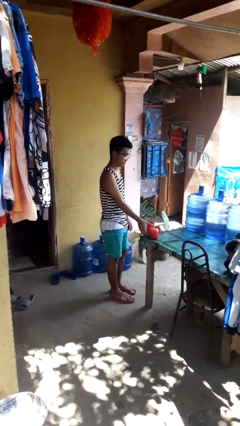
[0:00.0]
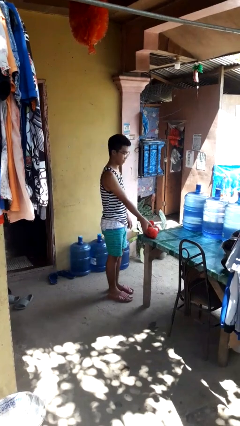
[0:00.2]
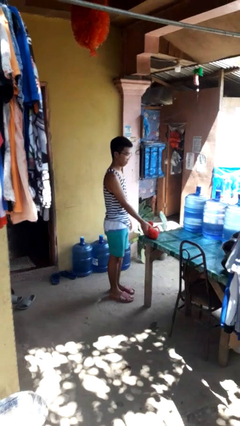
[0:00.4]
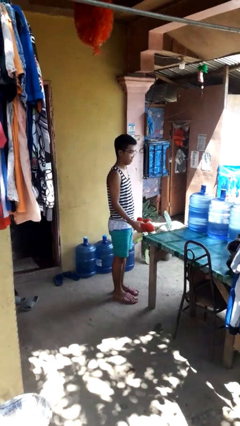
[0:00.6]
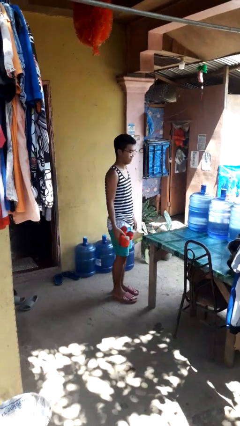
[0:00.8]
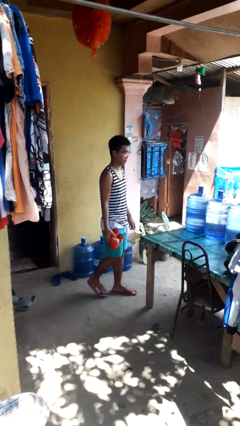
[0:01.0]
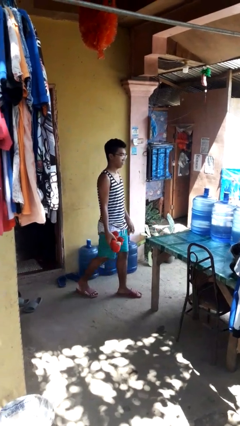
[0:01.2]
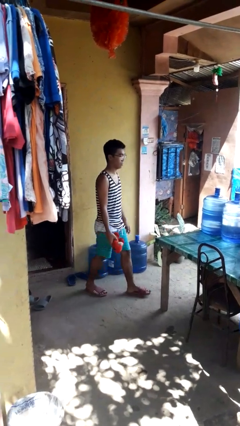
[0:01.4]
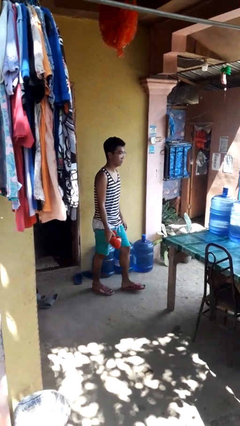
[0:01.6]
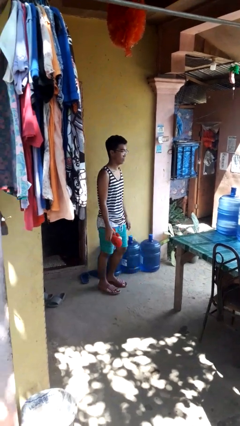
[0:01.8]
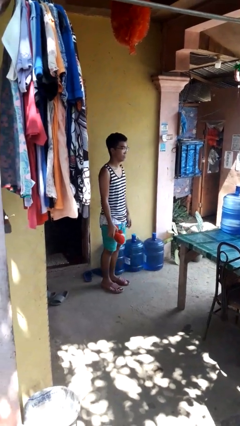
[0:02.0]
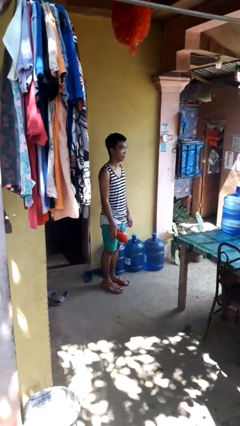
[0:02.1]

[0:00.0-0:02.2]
person picks up object from table

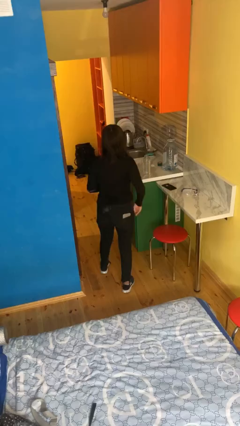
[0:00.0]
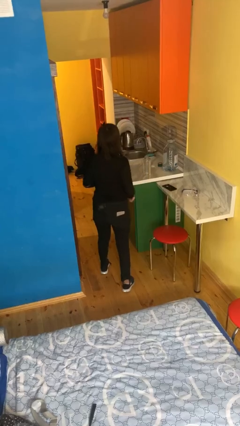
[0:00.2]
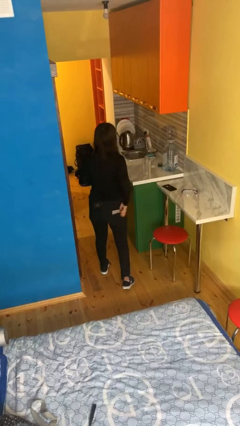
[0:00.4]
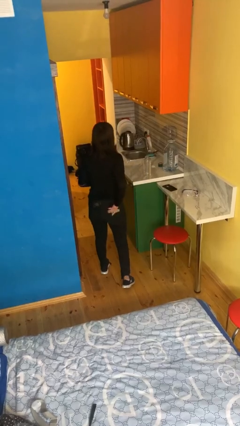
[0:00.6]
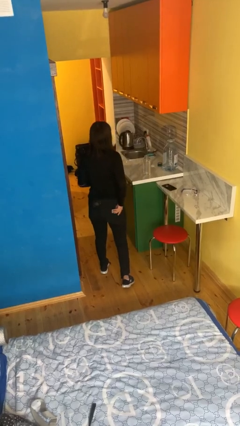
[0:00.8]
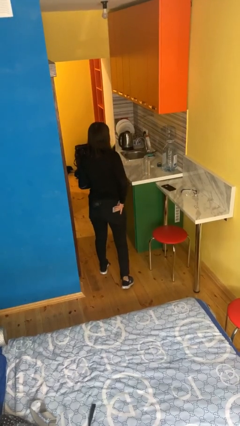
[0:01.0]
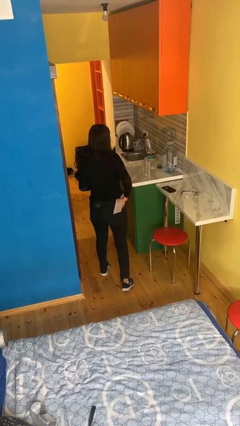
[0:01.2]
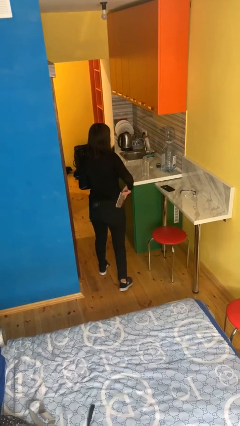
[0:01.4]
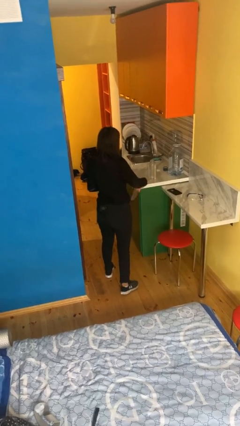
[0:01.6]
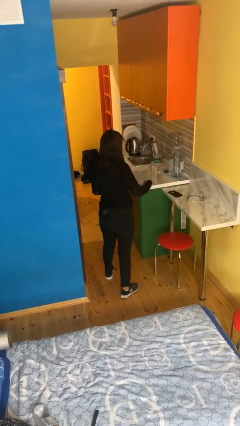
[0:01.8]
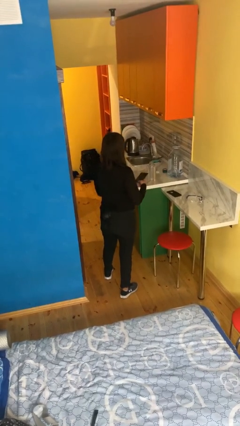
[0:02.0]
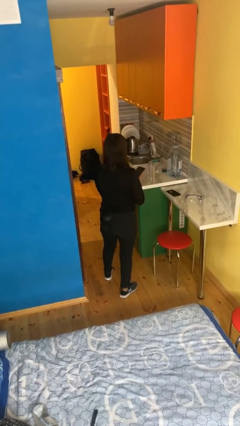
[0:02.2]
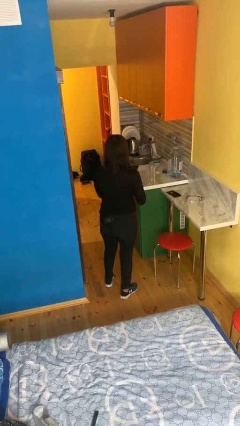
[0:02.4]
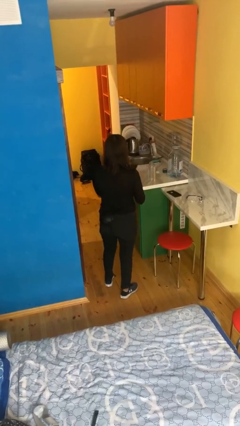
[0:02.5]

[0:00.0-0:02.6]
person takes phone from pocket

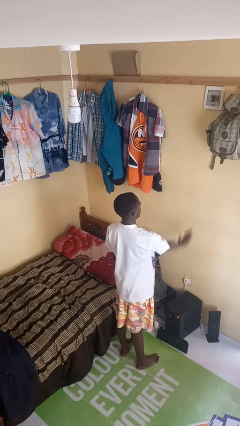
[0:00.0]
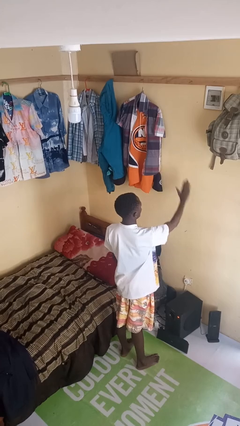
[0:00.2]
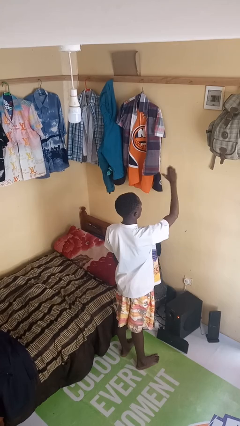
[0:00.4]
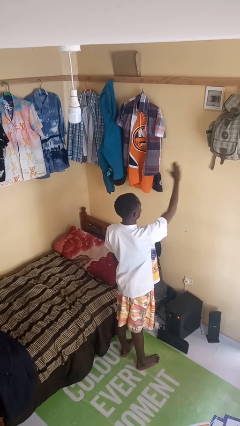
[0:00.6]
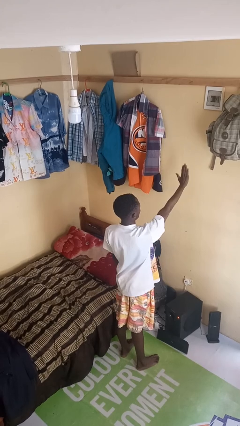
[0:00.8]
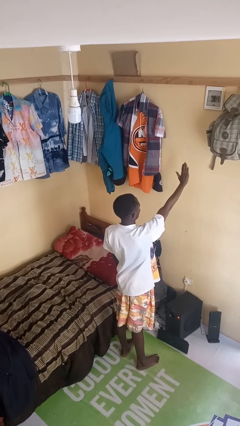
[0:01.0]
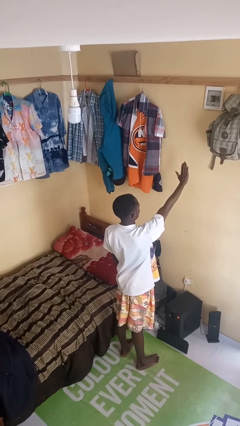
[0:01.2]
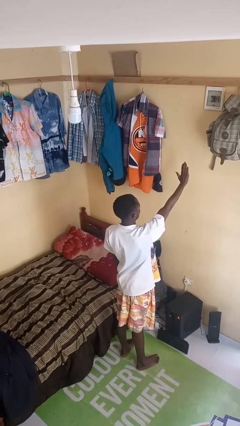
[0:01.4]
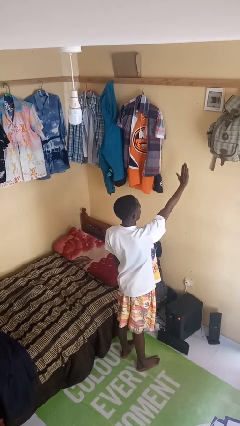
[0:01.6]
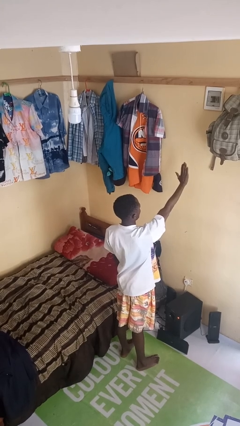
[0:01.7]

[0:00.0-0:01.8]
person gestures stop

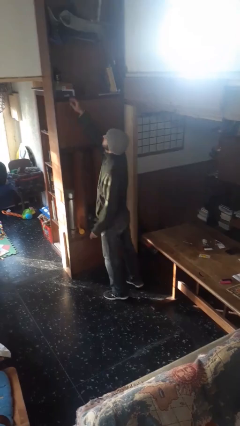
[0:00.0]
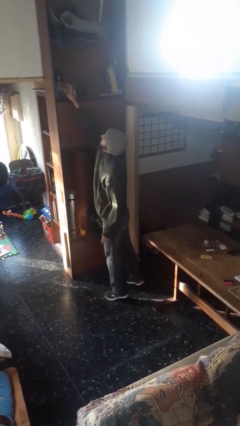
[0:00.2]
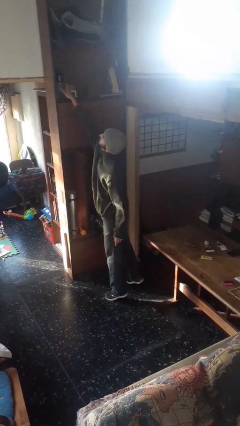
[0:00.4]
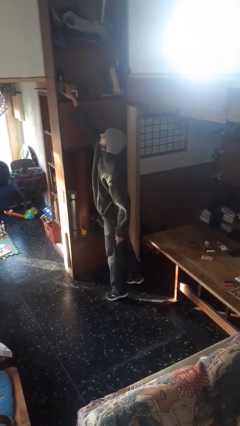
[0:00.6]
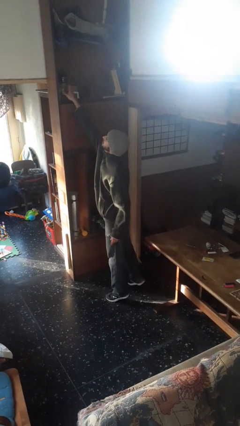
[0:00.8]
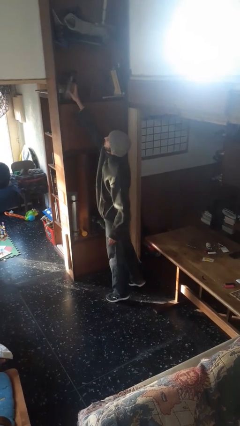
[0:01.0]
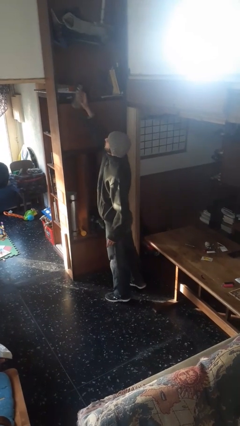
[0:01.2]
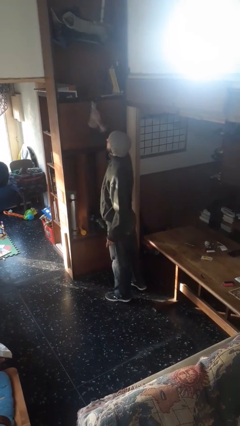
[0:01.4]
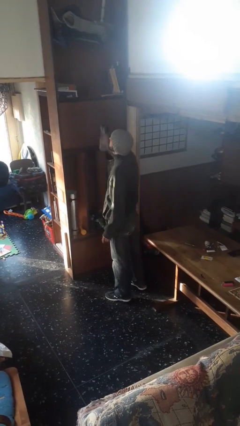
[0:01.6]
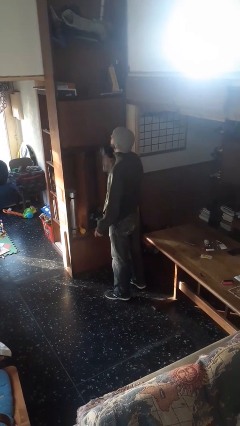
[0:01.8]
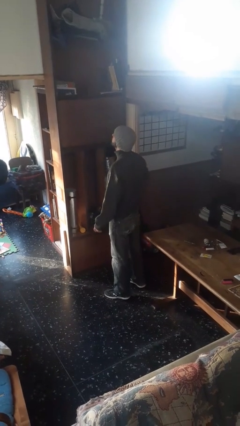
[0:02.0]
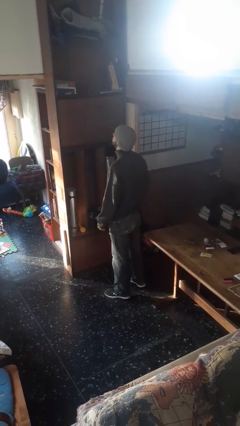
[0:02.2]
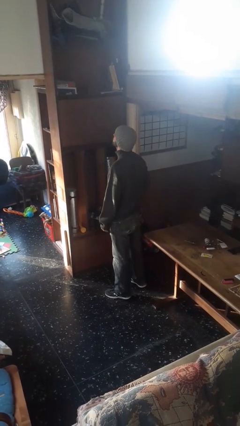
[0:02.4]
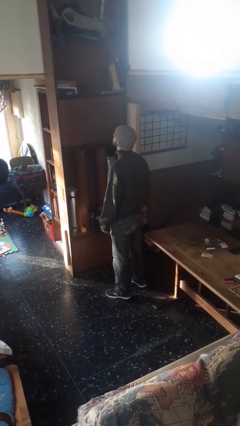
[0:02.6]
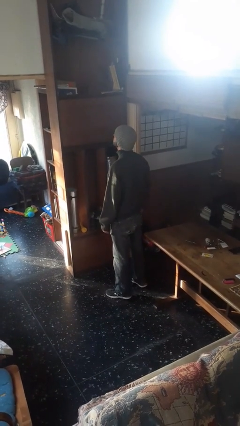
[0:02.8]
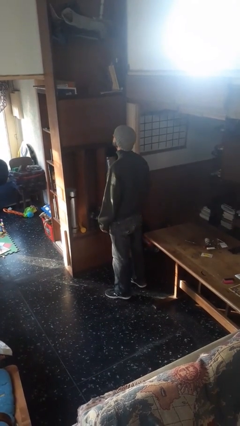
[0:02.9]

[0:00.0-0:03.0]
person puts down object on shelf

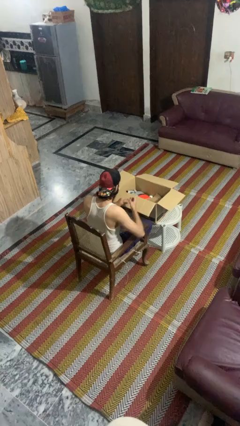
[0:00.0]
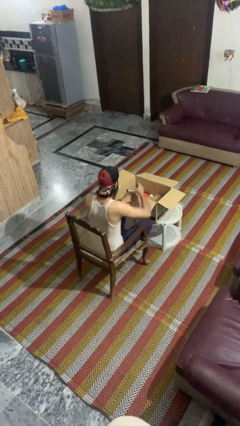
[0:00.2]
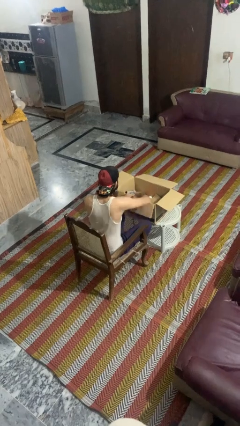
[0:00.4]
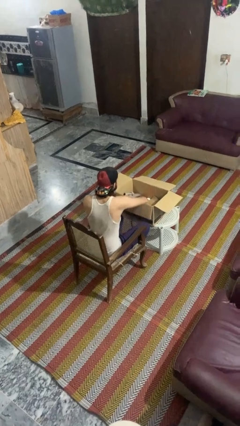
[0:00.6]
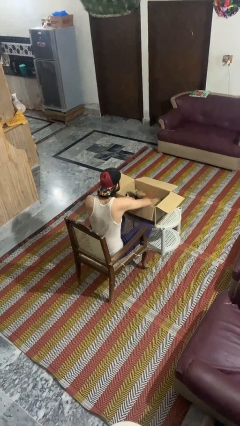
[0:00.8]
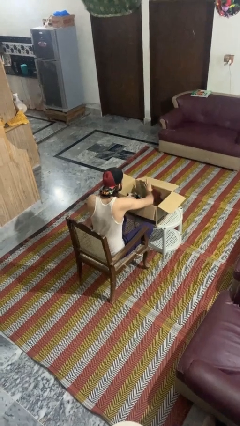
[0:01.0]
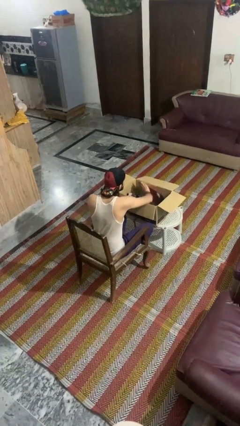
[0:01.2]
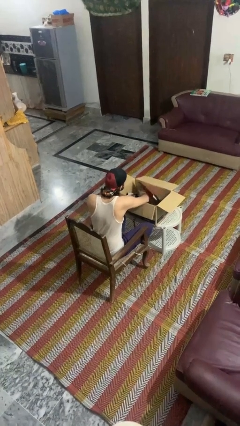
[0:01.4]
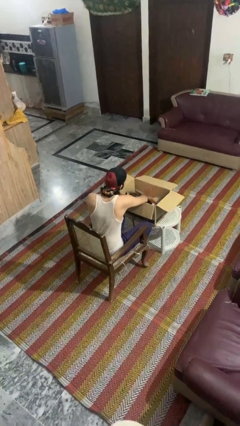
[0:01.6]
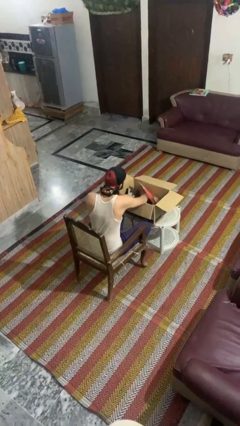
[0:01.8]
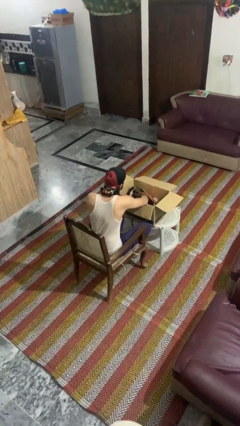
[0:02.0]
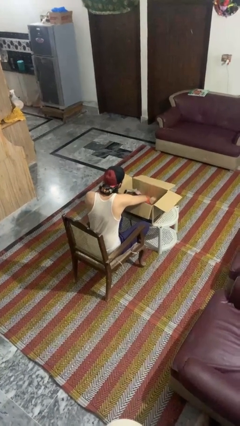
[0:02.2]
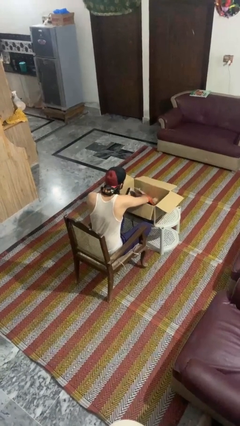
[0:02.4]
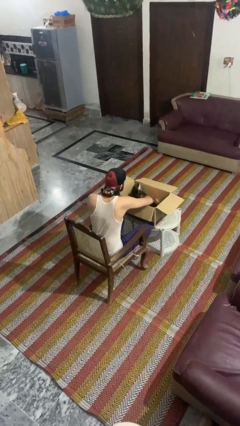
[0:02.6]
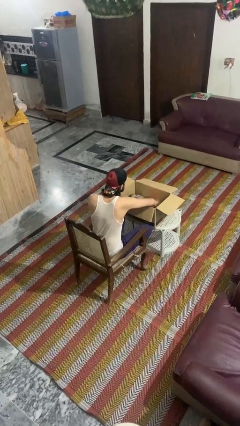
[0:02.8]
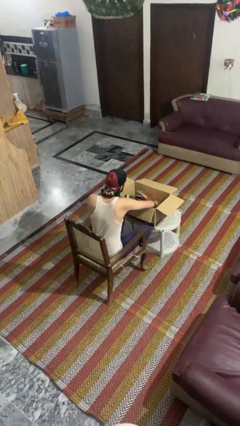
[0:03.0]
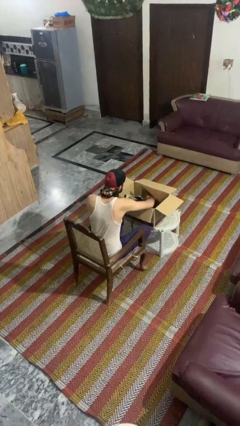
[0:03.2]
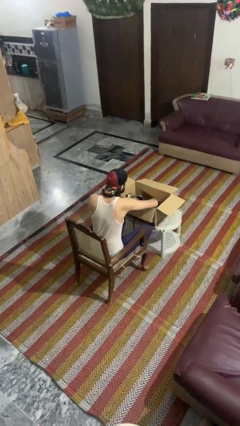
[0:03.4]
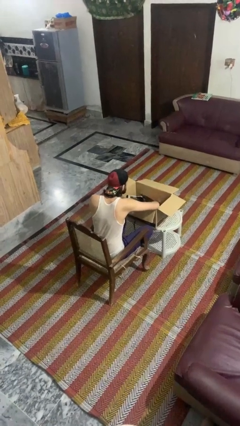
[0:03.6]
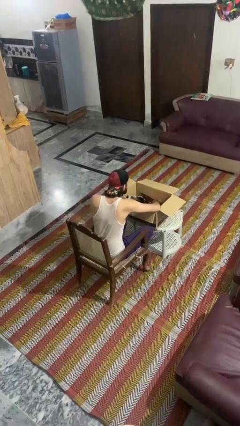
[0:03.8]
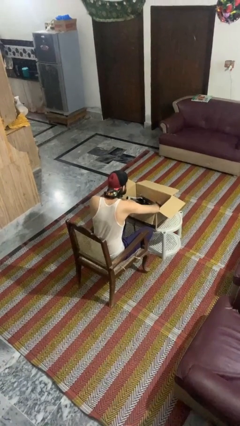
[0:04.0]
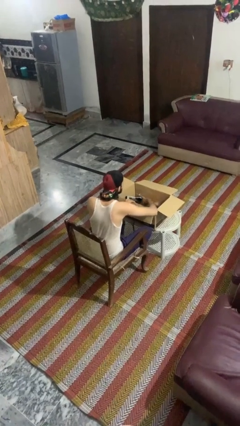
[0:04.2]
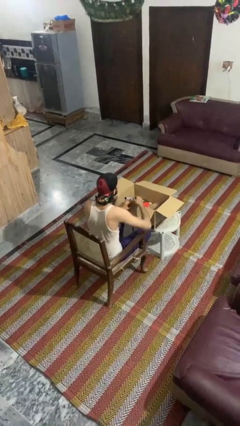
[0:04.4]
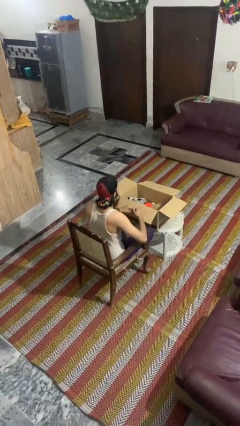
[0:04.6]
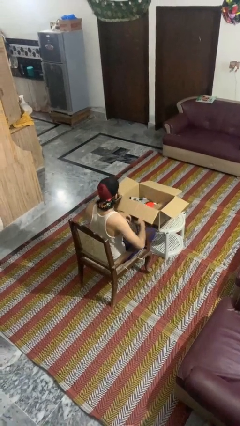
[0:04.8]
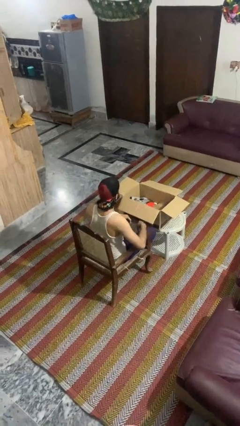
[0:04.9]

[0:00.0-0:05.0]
person searches in box

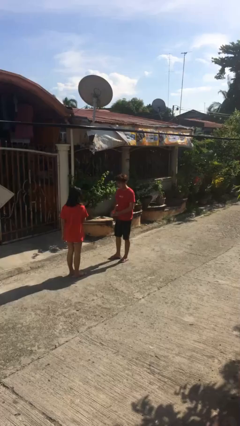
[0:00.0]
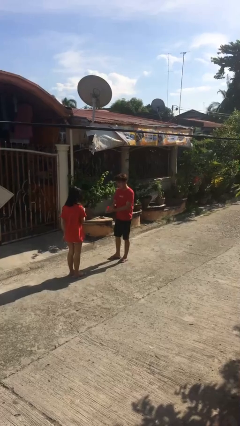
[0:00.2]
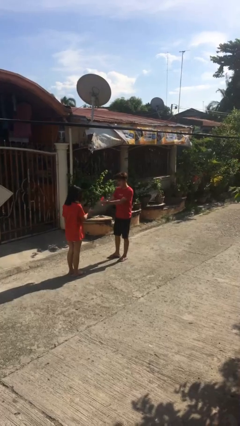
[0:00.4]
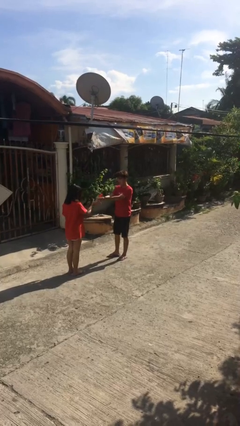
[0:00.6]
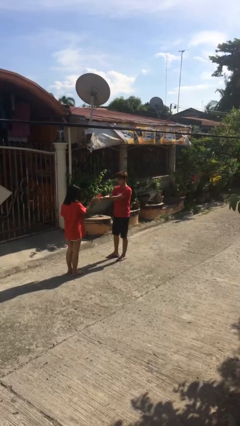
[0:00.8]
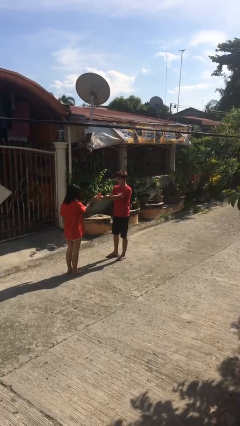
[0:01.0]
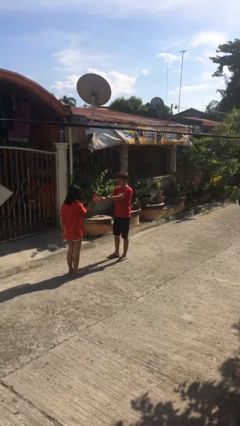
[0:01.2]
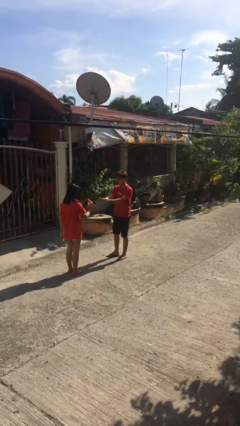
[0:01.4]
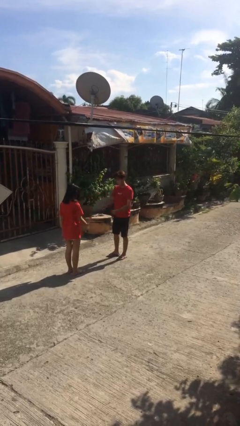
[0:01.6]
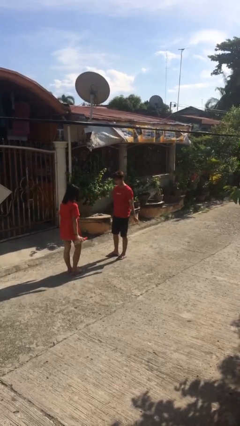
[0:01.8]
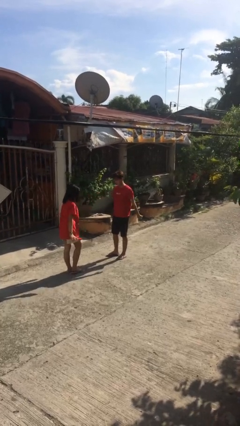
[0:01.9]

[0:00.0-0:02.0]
person transfers object to person

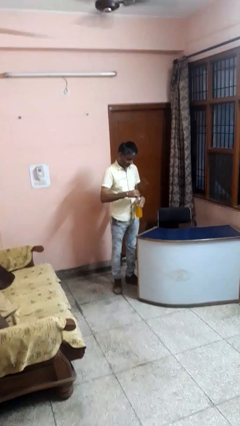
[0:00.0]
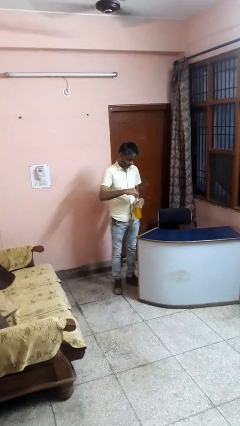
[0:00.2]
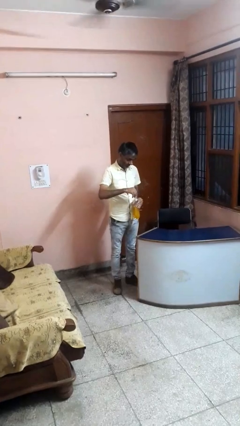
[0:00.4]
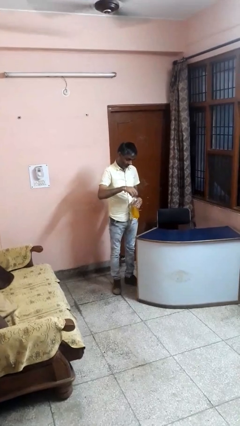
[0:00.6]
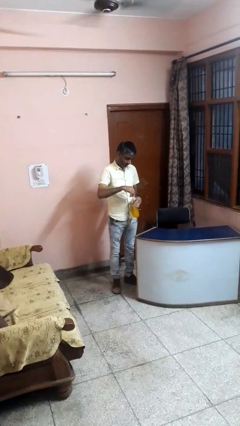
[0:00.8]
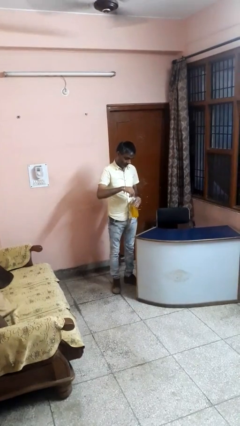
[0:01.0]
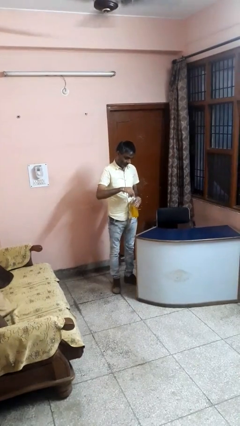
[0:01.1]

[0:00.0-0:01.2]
person screws lid to bottle
